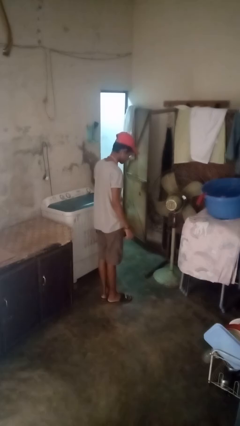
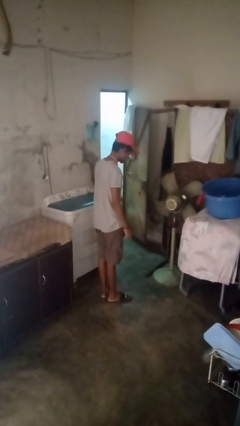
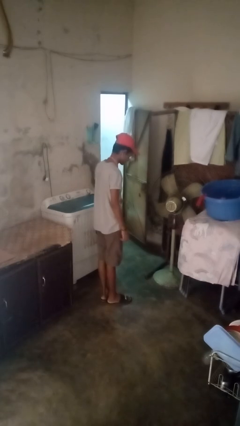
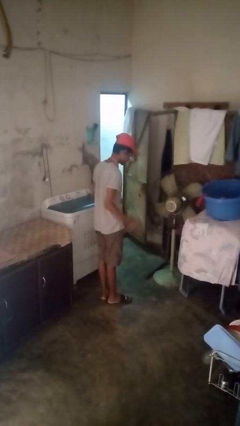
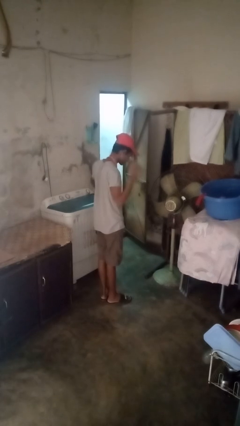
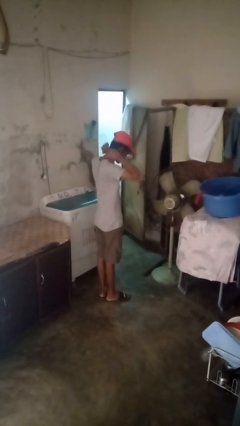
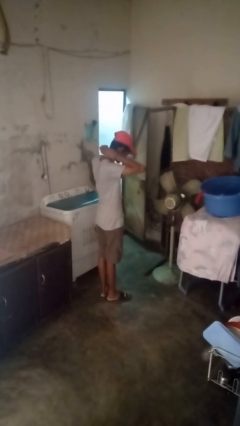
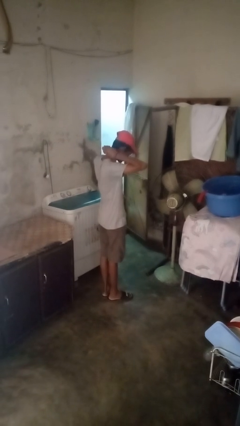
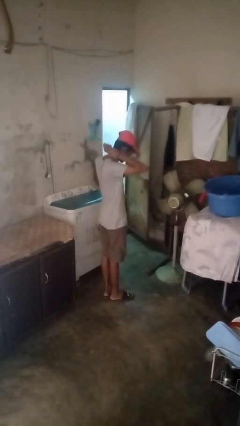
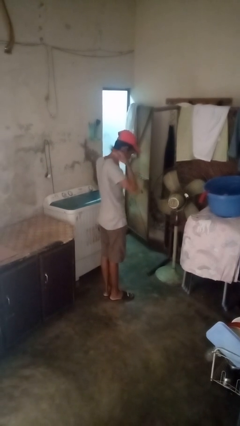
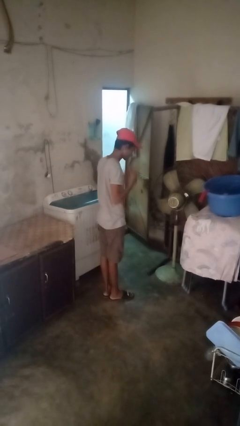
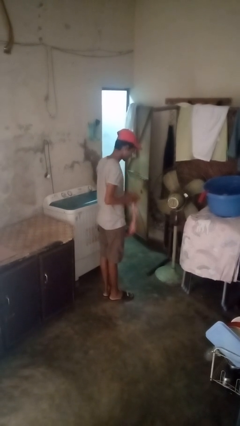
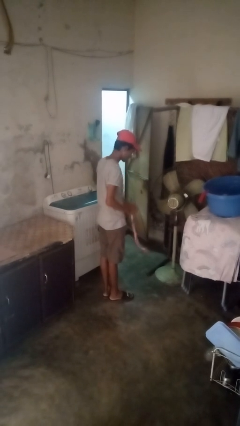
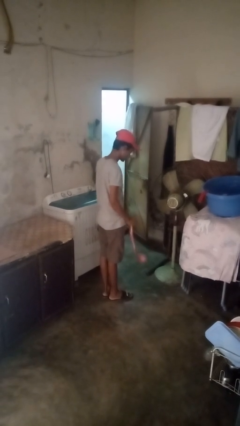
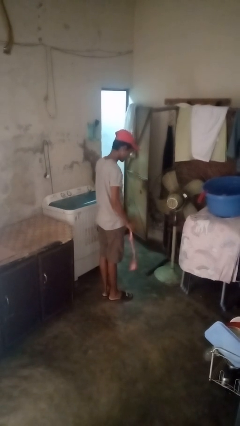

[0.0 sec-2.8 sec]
person takes off necktie

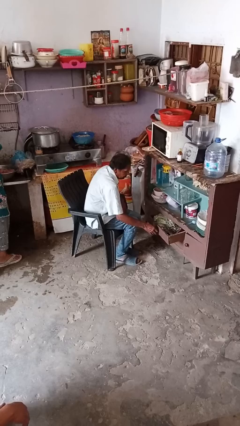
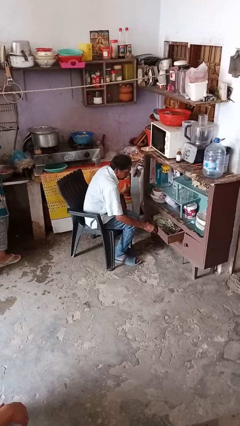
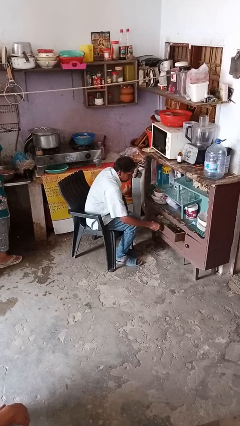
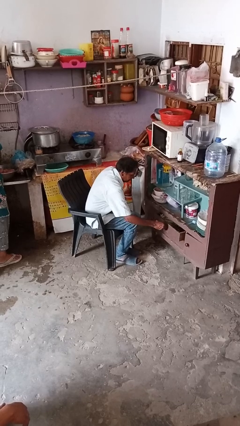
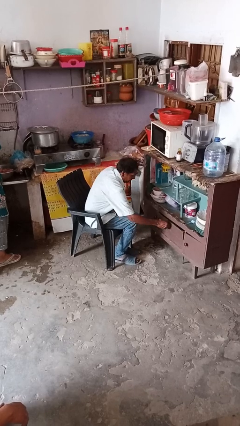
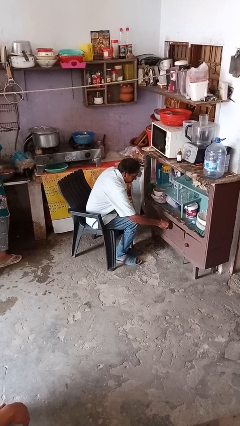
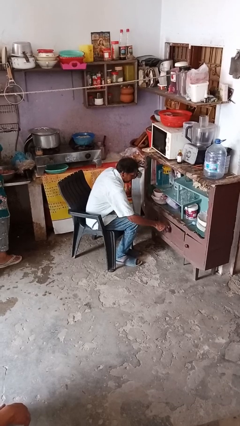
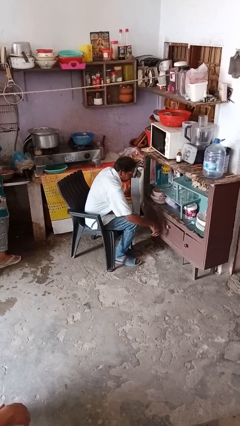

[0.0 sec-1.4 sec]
person closes dresser drawer

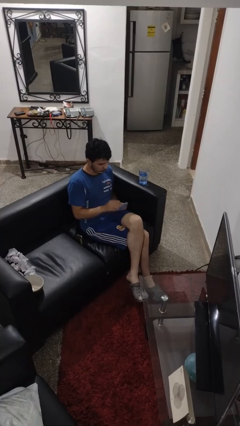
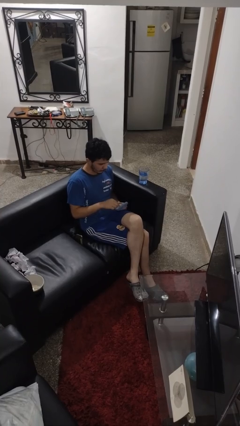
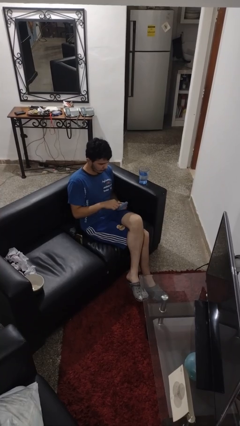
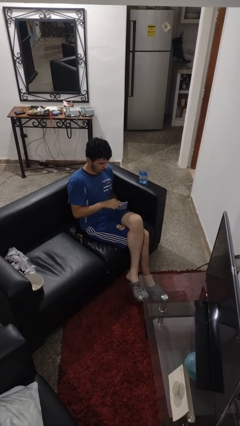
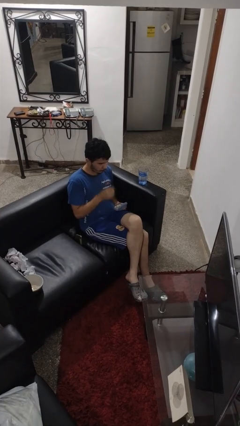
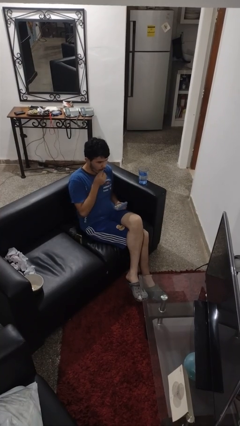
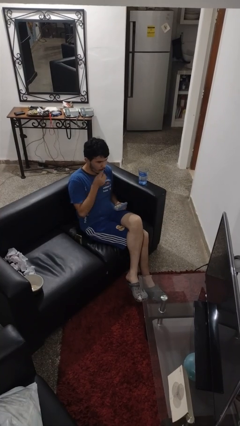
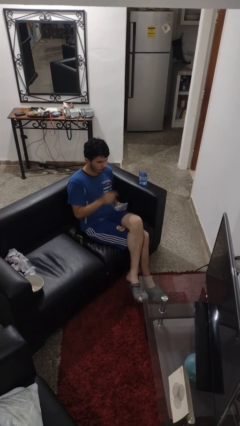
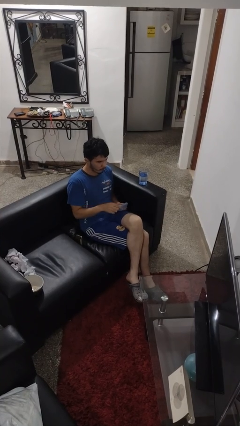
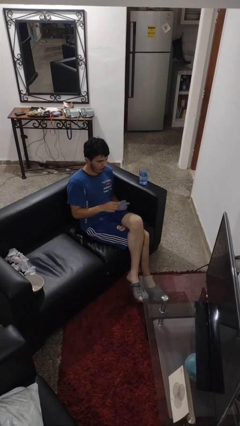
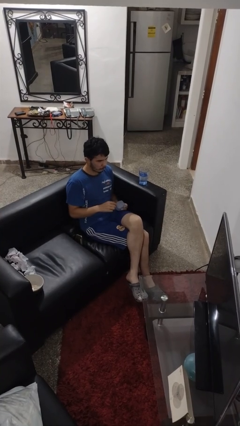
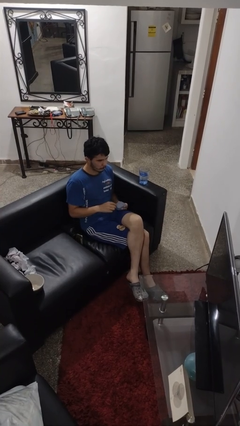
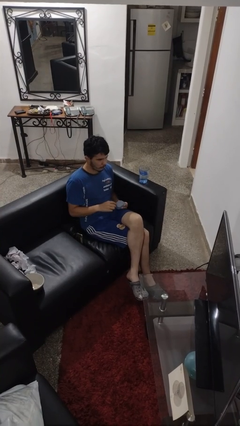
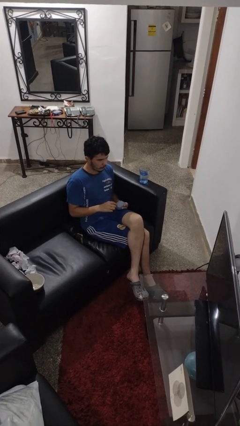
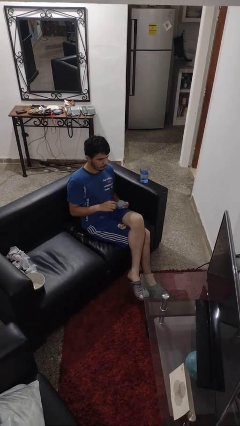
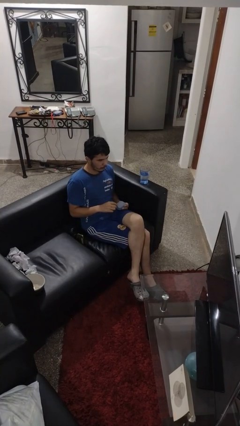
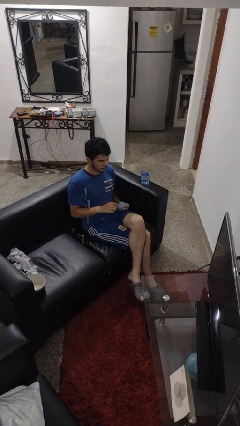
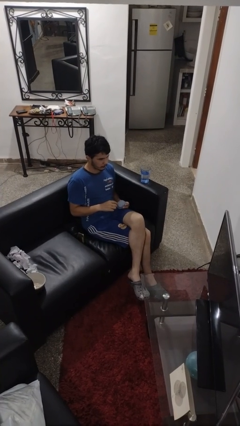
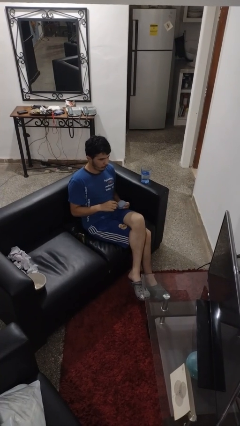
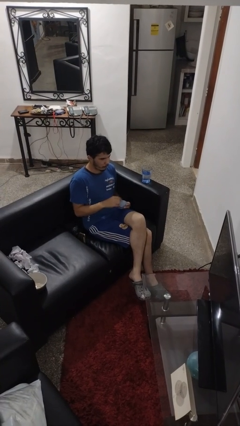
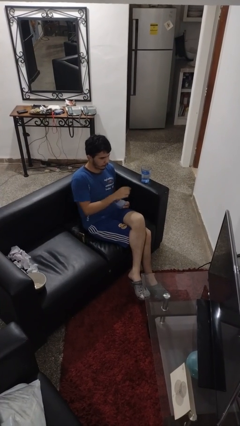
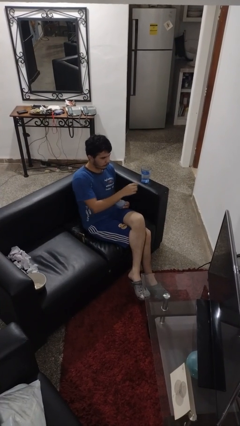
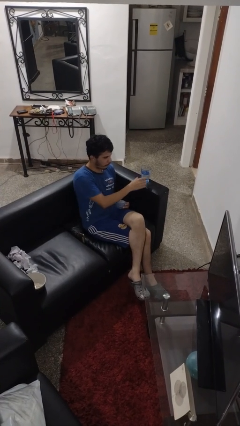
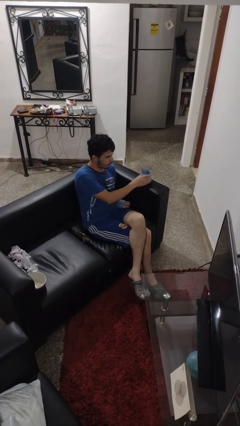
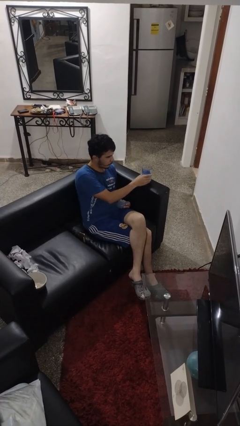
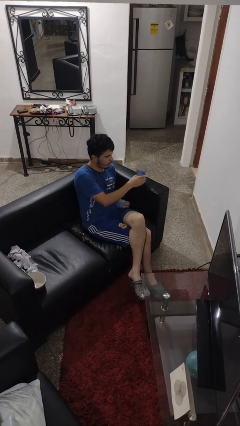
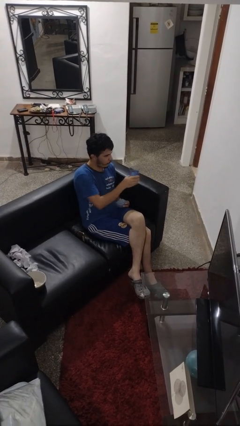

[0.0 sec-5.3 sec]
person takes medicine pills

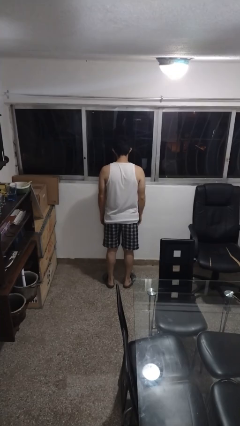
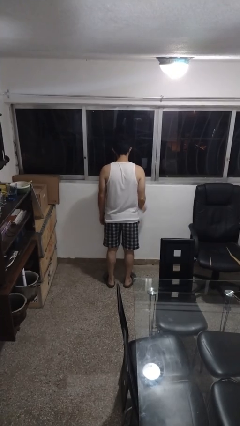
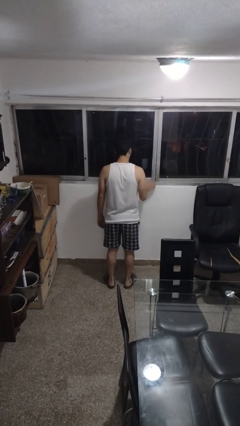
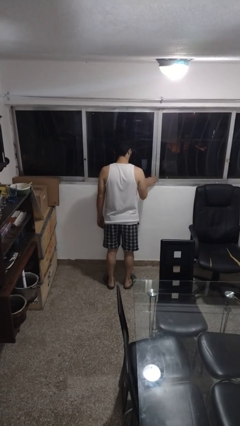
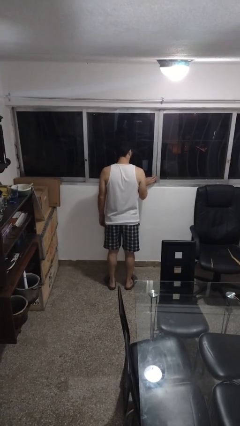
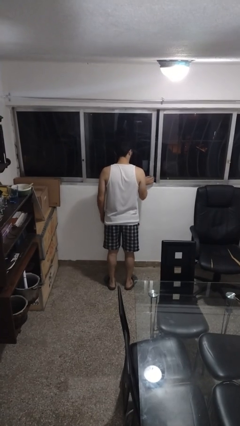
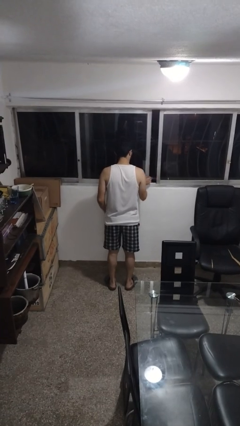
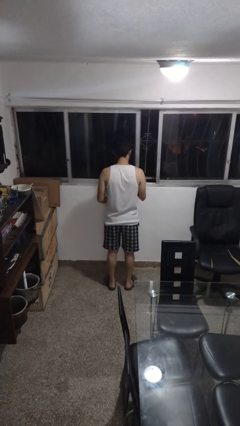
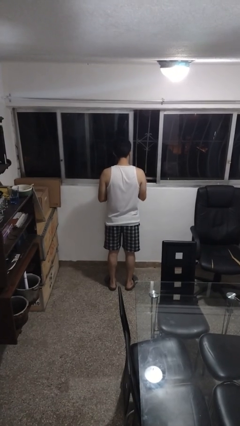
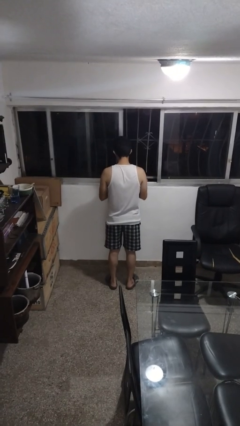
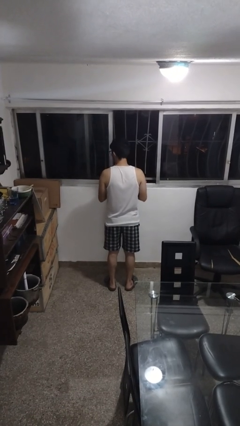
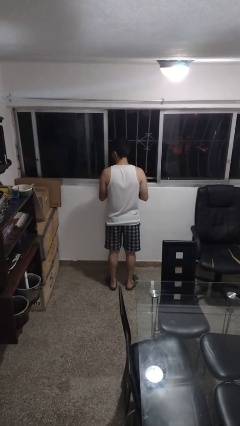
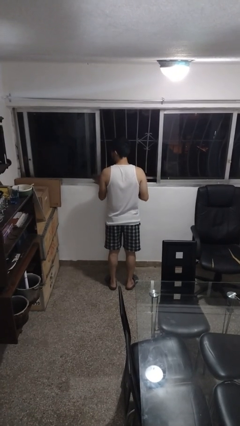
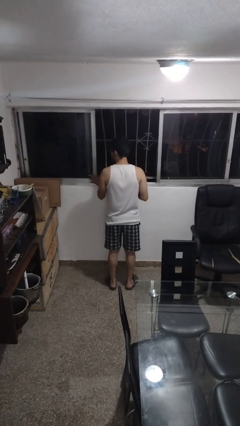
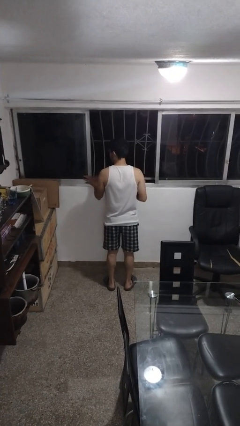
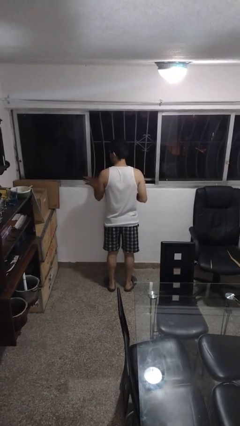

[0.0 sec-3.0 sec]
person opens home window

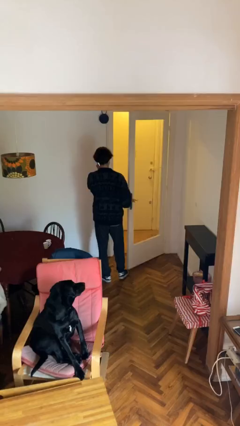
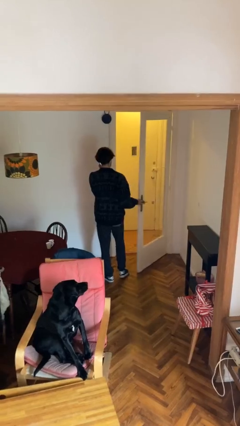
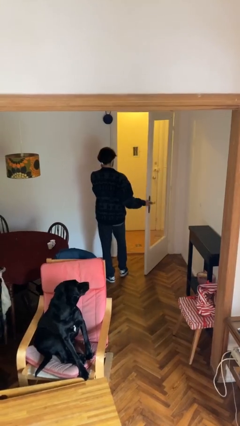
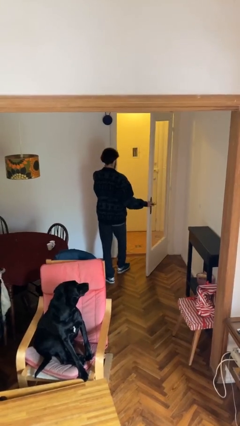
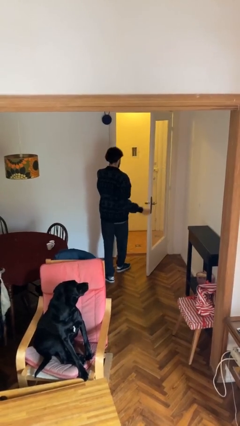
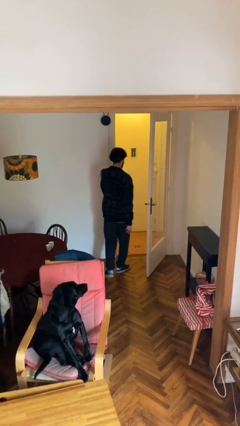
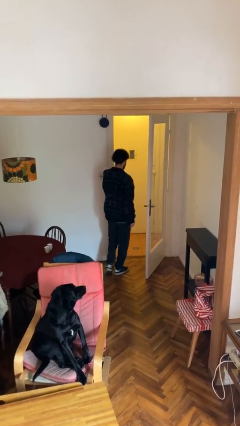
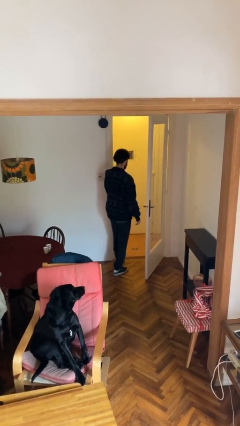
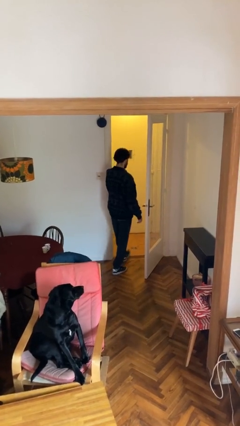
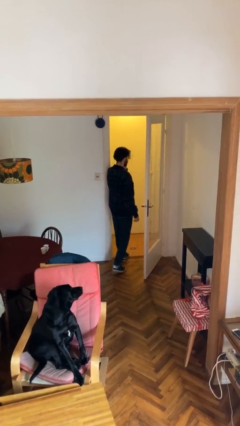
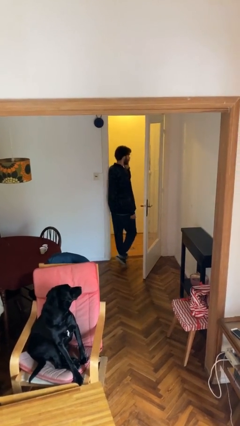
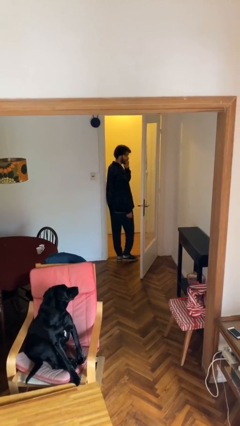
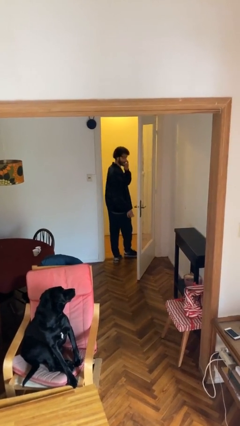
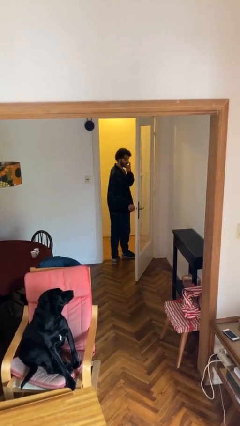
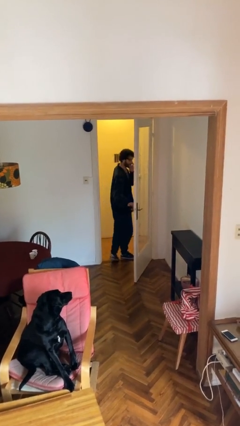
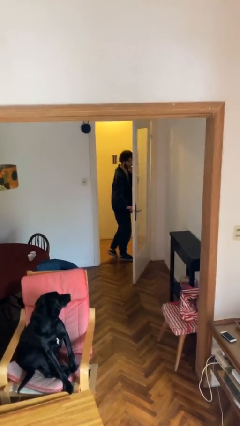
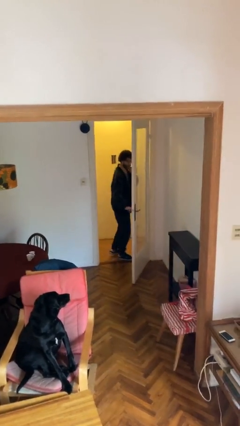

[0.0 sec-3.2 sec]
person exits scene through structure

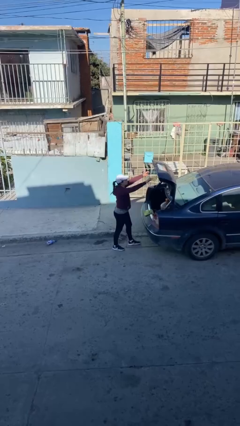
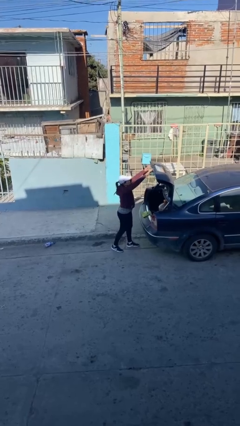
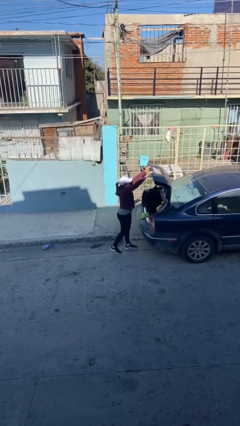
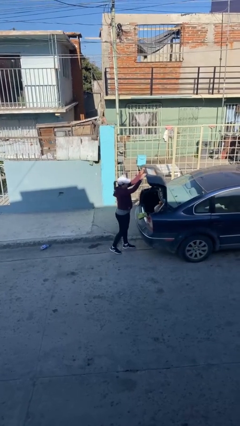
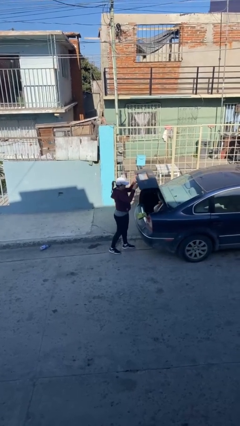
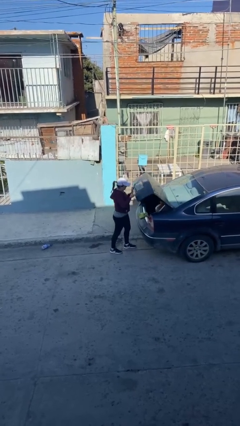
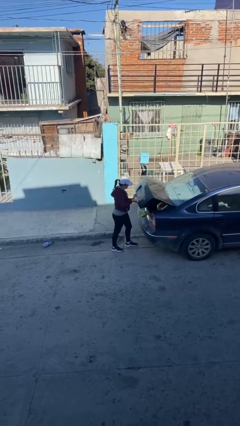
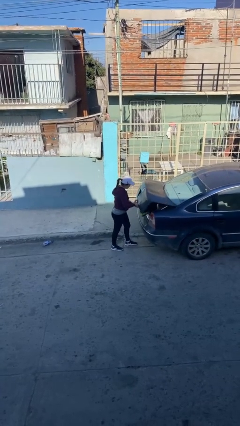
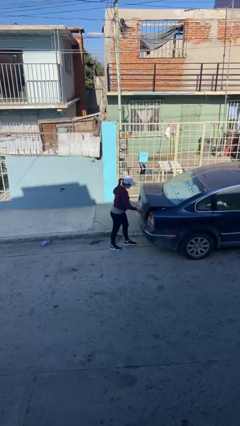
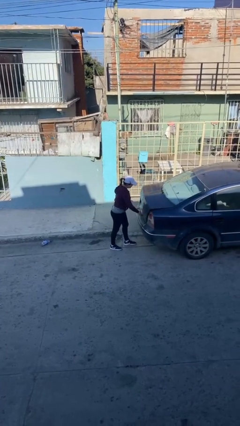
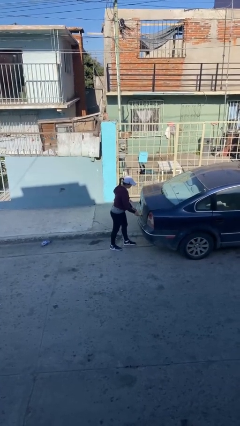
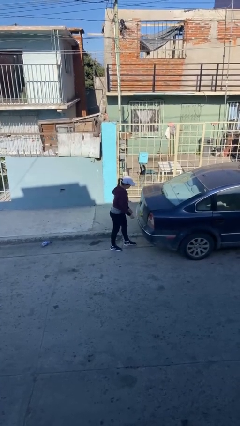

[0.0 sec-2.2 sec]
person closes car trunk
